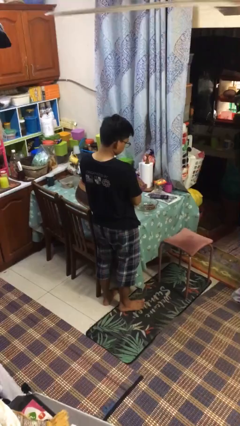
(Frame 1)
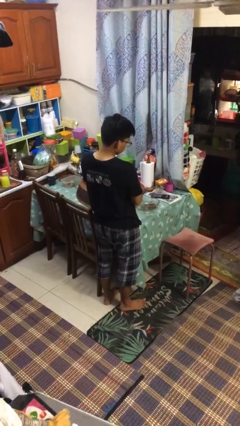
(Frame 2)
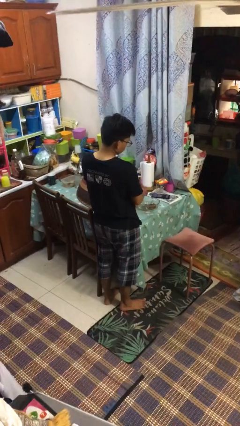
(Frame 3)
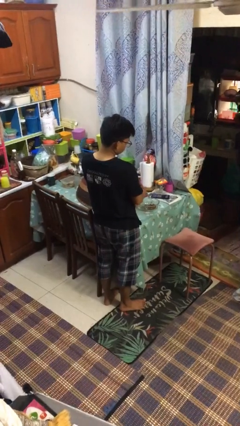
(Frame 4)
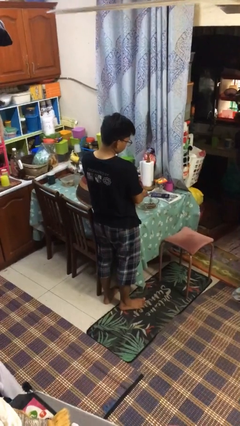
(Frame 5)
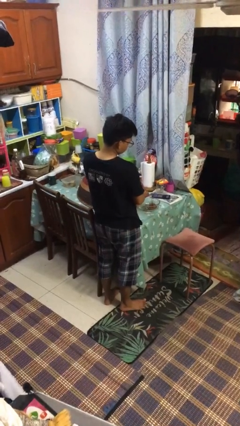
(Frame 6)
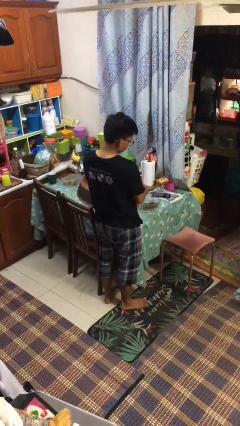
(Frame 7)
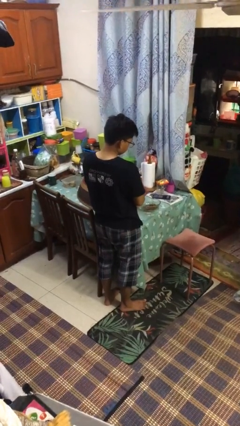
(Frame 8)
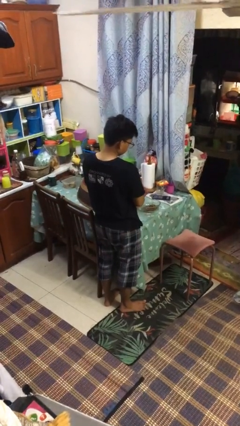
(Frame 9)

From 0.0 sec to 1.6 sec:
person pours into bowl

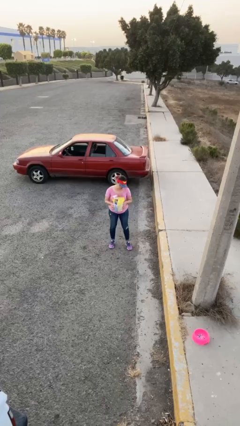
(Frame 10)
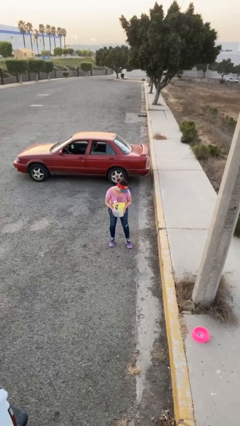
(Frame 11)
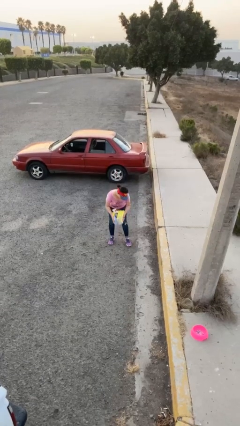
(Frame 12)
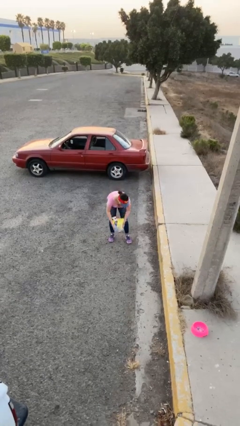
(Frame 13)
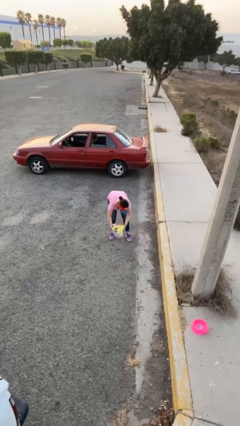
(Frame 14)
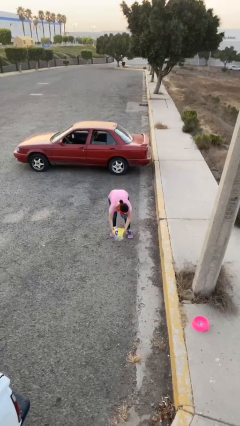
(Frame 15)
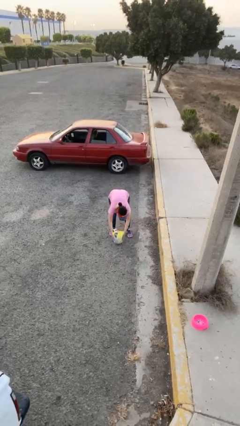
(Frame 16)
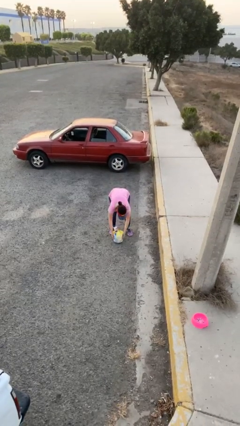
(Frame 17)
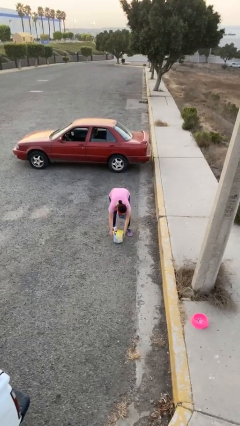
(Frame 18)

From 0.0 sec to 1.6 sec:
person puts down object on floor

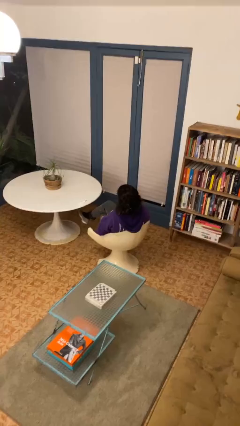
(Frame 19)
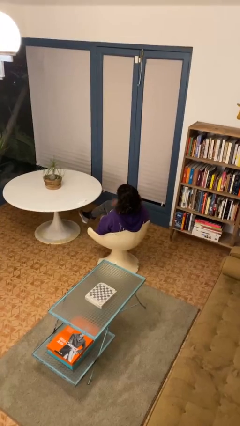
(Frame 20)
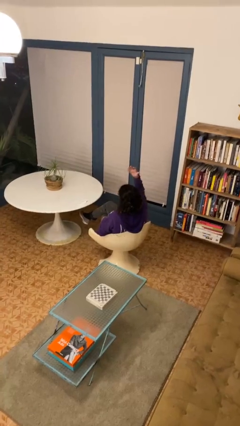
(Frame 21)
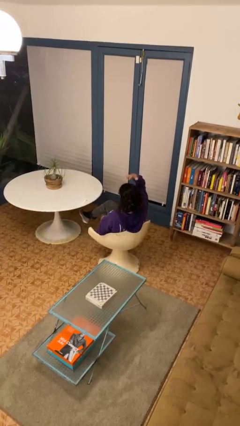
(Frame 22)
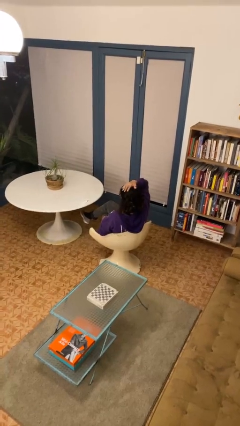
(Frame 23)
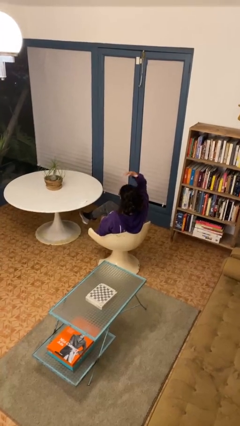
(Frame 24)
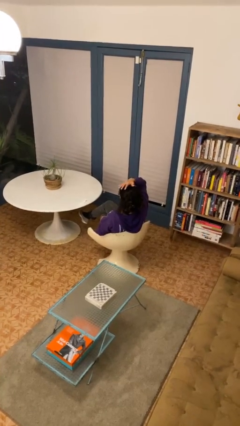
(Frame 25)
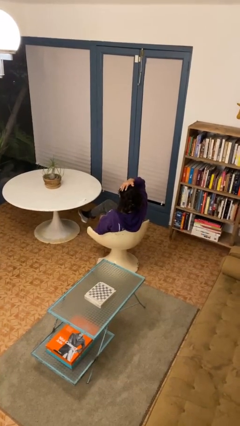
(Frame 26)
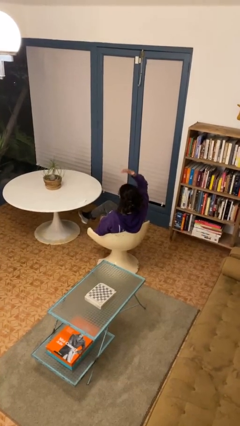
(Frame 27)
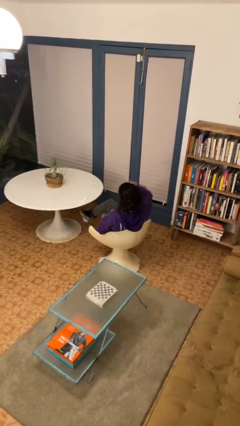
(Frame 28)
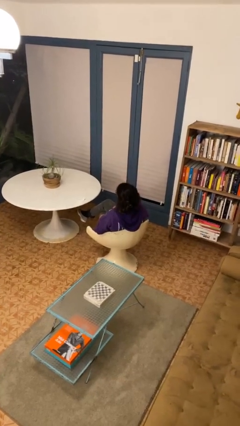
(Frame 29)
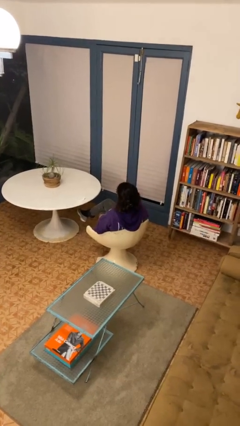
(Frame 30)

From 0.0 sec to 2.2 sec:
person pats head

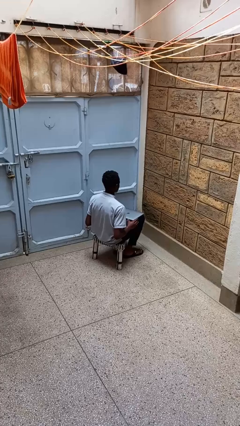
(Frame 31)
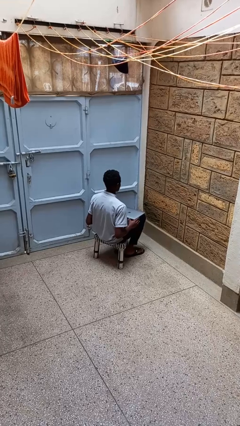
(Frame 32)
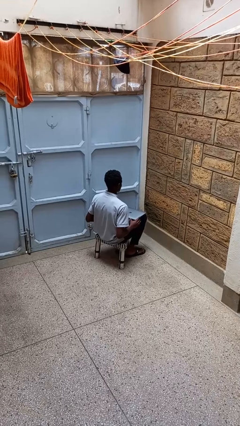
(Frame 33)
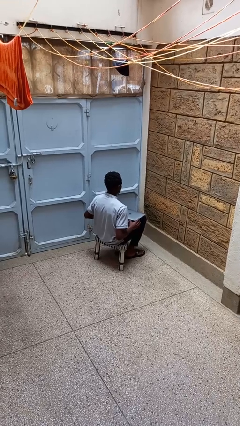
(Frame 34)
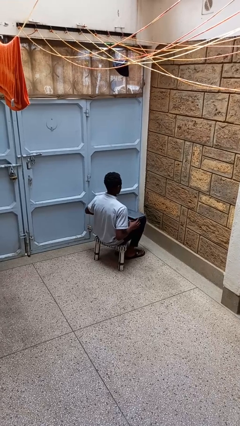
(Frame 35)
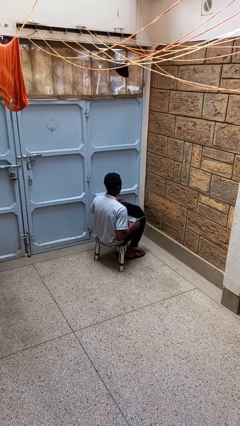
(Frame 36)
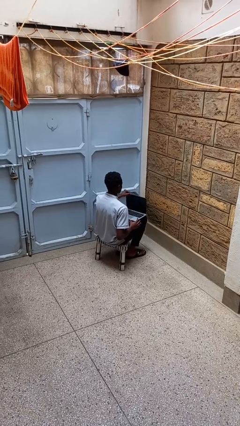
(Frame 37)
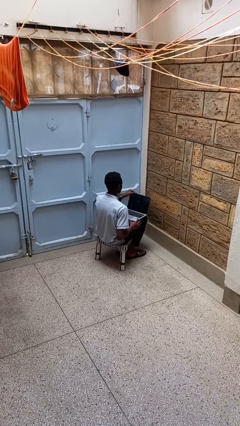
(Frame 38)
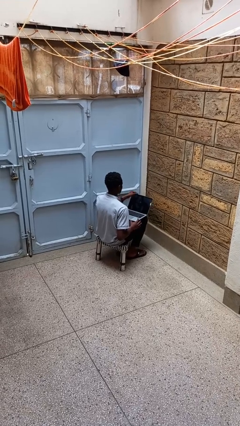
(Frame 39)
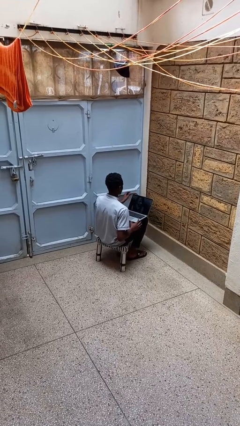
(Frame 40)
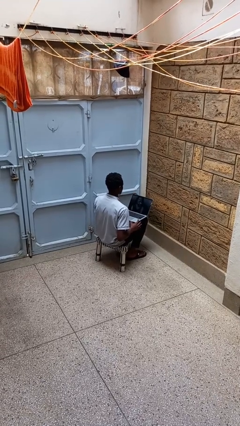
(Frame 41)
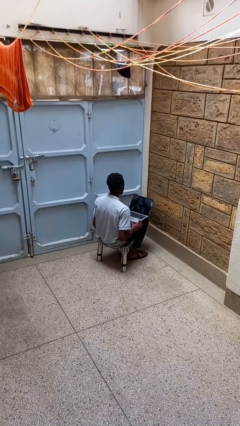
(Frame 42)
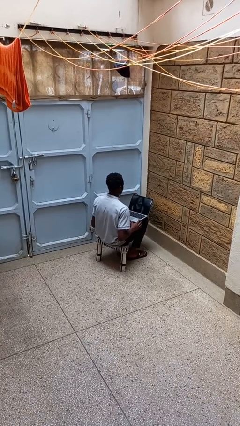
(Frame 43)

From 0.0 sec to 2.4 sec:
person opens laptop

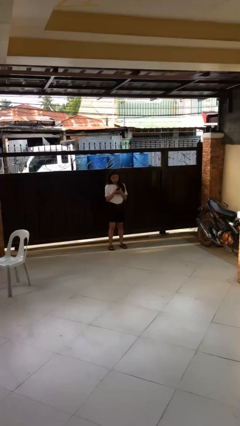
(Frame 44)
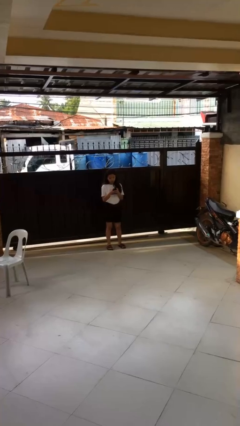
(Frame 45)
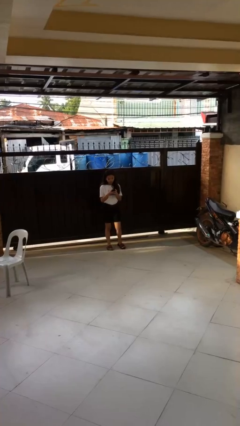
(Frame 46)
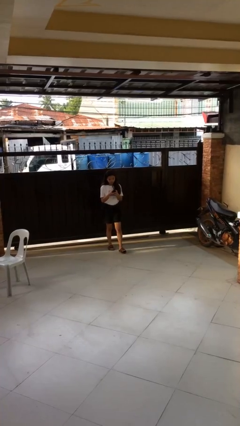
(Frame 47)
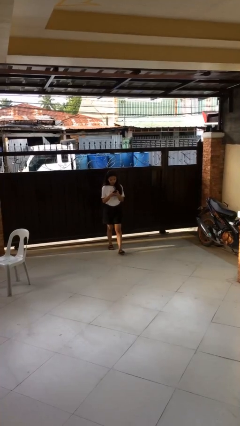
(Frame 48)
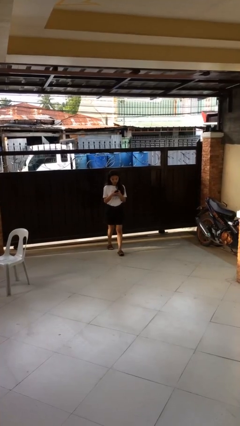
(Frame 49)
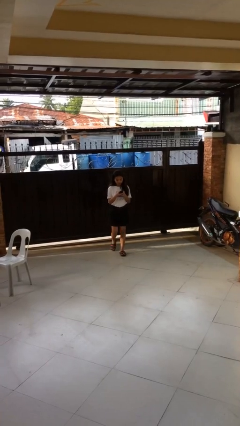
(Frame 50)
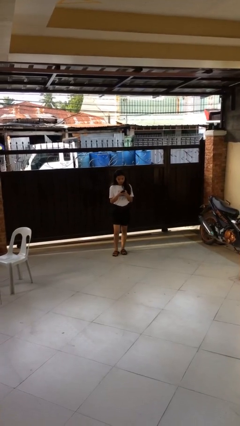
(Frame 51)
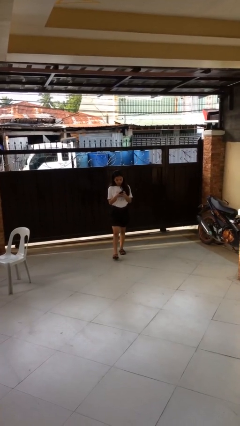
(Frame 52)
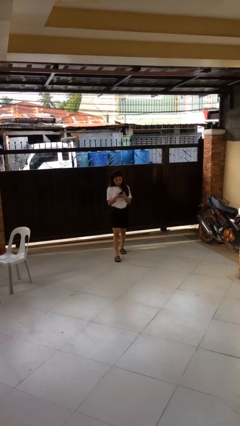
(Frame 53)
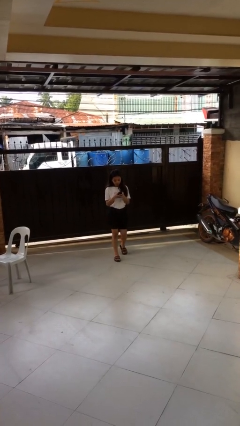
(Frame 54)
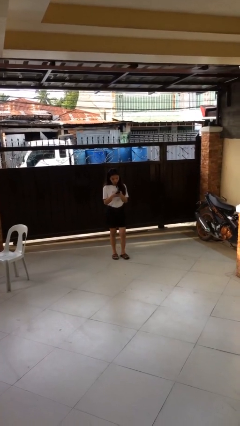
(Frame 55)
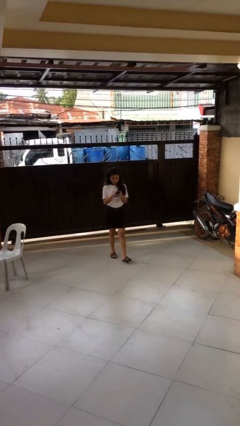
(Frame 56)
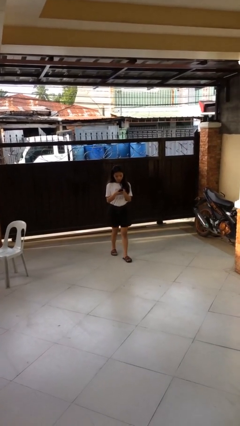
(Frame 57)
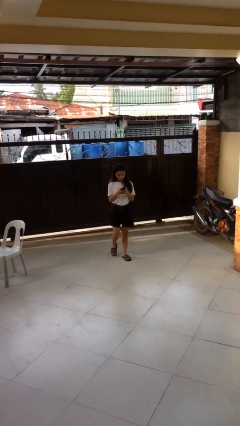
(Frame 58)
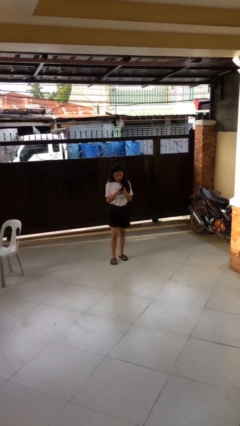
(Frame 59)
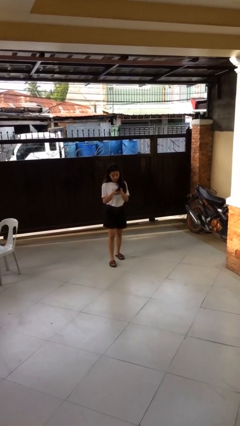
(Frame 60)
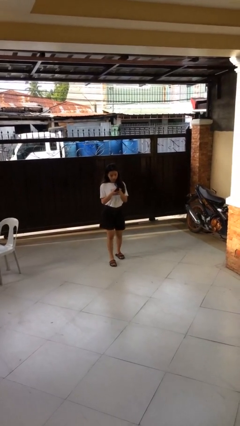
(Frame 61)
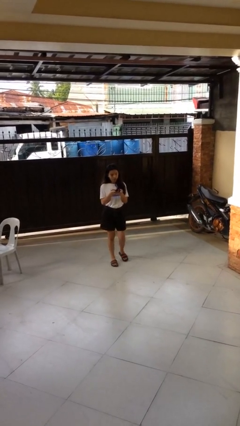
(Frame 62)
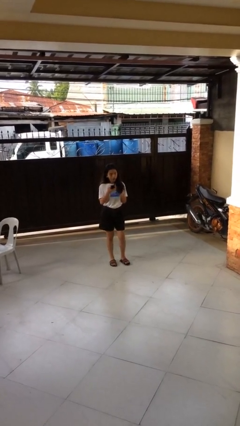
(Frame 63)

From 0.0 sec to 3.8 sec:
person texts on phone

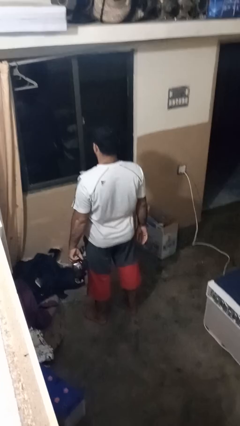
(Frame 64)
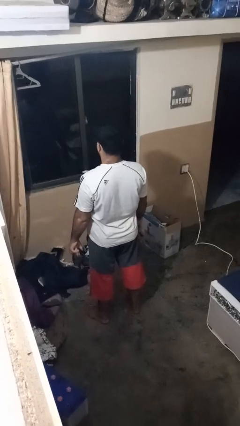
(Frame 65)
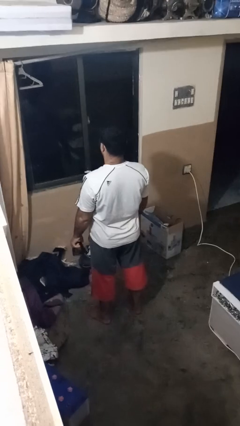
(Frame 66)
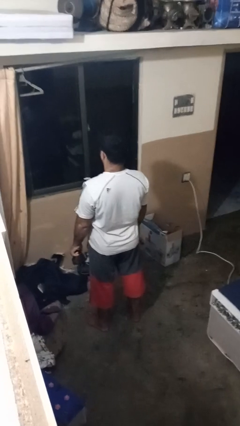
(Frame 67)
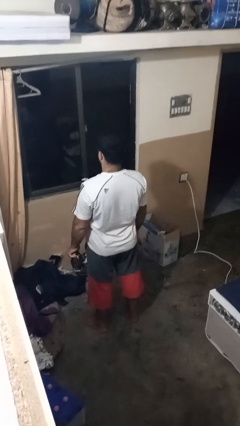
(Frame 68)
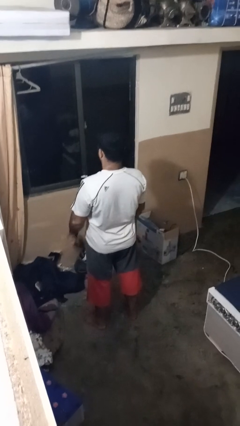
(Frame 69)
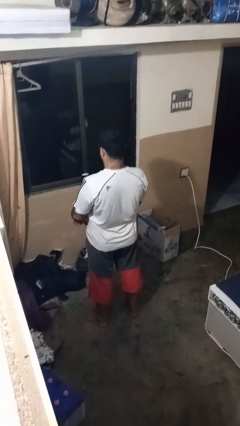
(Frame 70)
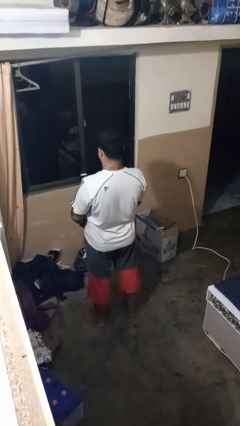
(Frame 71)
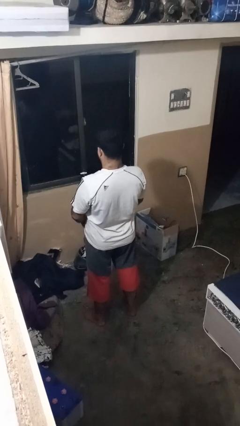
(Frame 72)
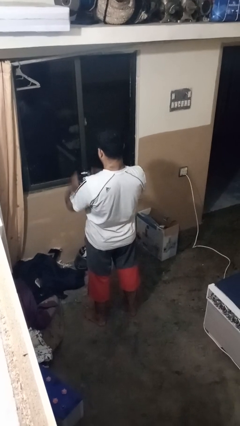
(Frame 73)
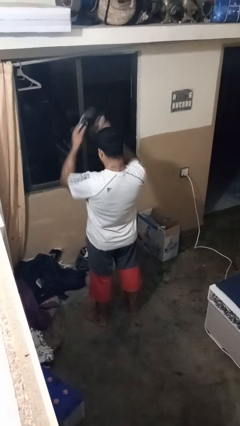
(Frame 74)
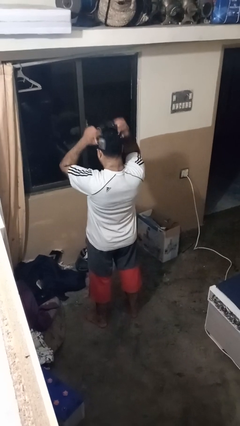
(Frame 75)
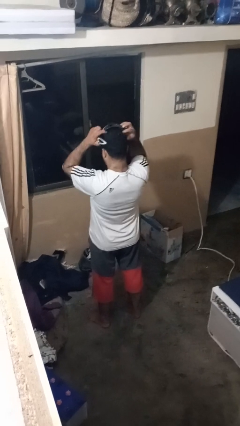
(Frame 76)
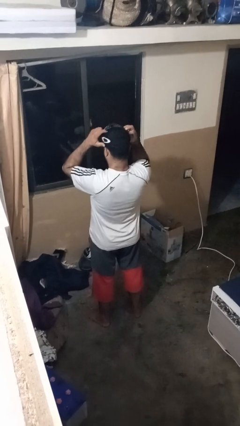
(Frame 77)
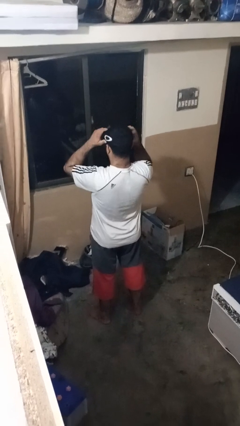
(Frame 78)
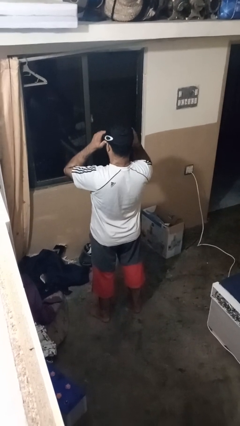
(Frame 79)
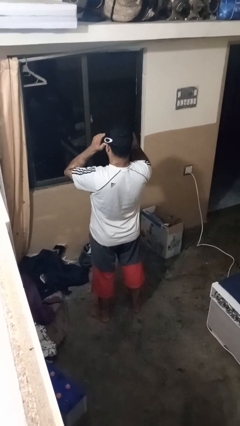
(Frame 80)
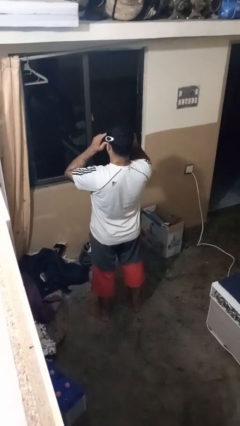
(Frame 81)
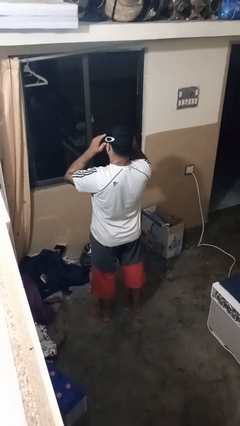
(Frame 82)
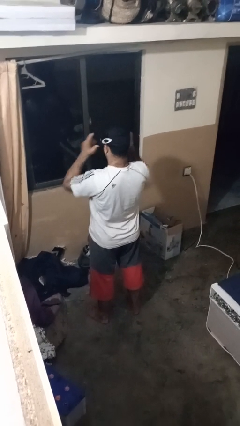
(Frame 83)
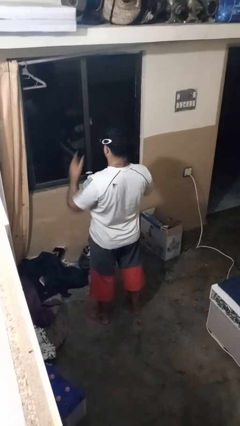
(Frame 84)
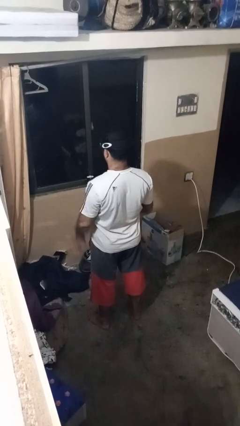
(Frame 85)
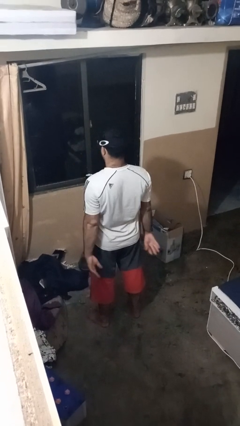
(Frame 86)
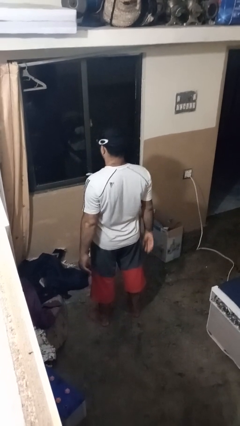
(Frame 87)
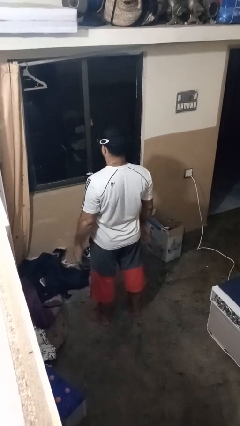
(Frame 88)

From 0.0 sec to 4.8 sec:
person puts on sunglasses

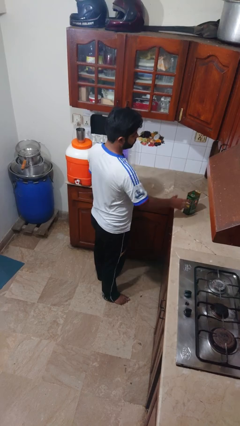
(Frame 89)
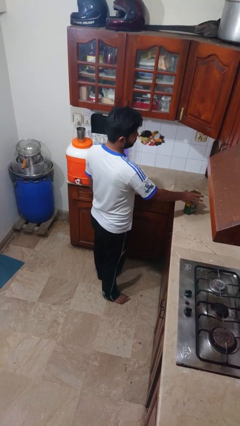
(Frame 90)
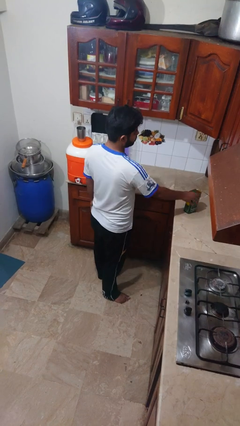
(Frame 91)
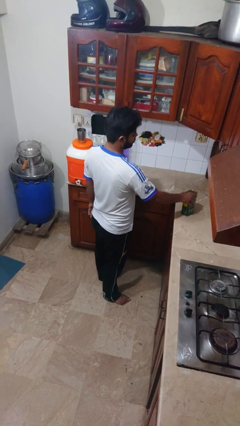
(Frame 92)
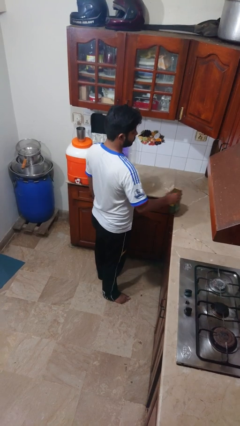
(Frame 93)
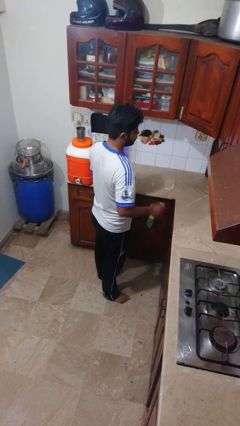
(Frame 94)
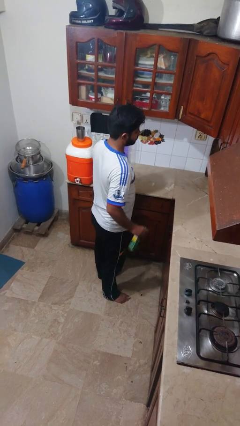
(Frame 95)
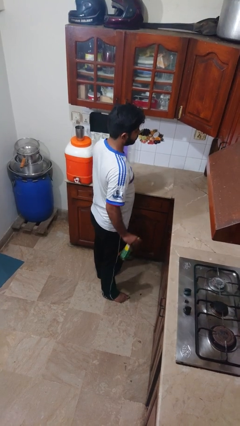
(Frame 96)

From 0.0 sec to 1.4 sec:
person picks up object from countertop
